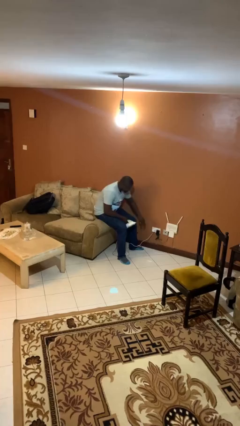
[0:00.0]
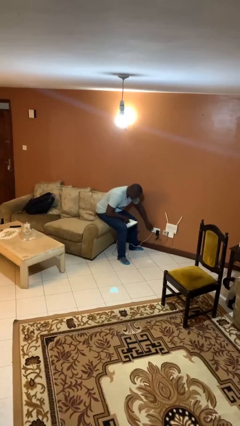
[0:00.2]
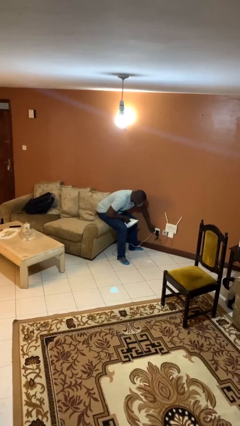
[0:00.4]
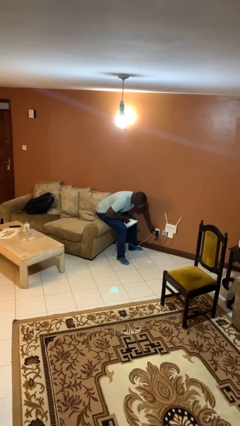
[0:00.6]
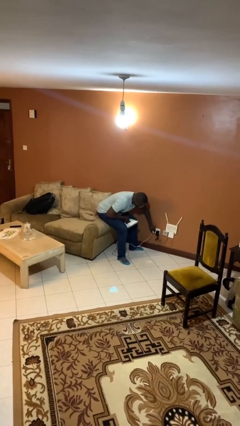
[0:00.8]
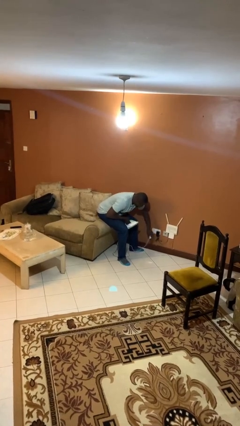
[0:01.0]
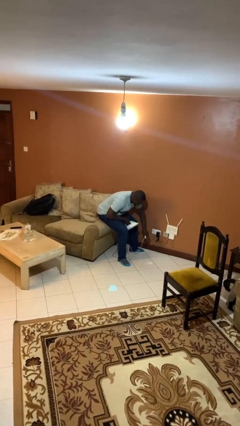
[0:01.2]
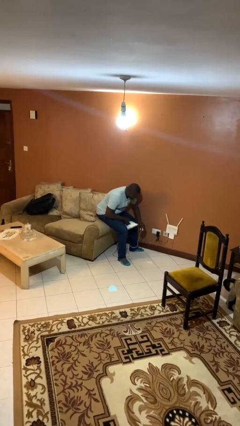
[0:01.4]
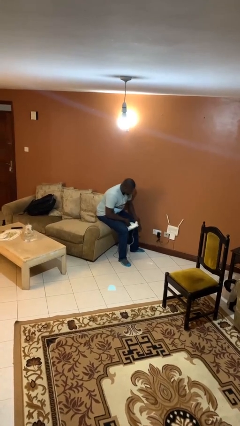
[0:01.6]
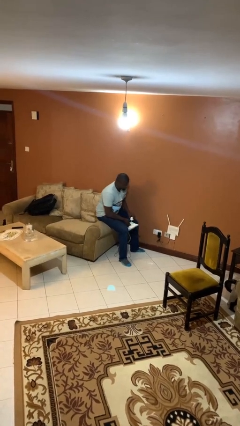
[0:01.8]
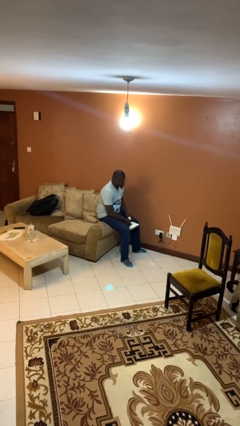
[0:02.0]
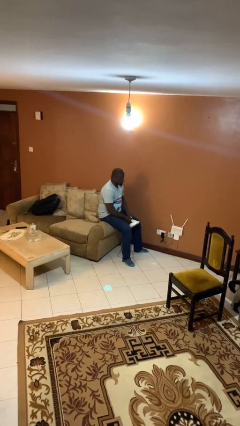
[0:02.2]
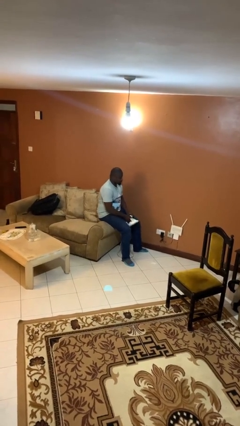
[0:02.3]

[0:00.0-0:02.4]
person unplugs from electrical socket

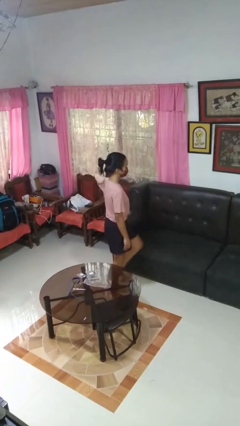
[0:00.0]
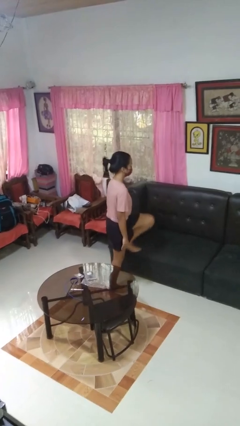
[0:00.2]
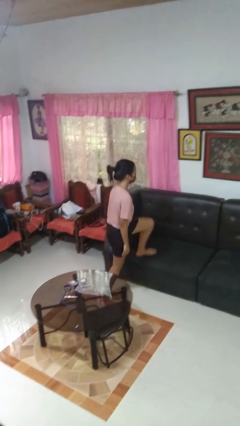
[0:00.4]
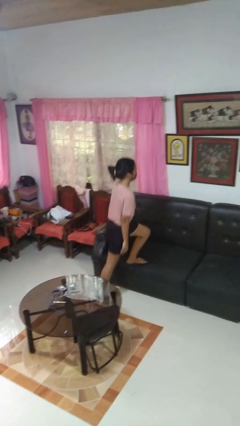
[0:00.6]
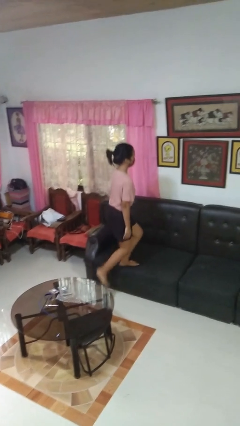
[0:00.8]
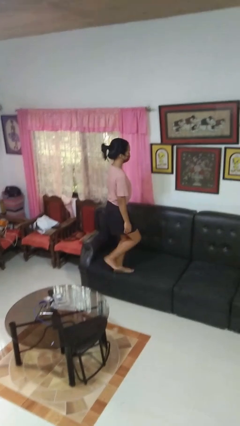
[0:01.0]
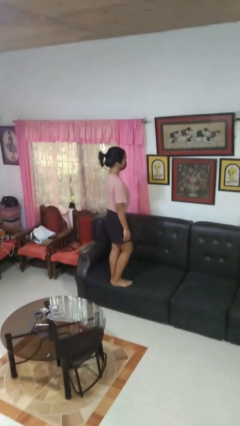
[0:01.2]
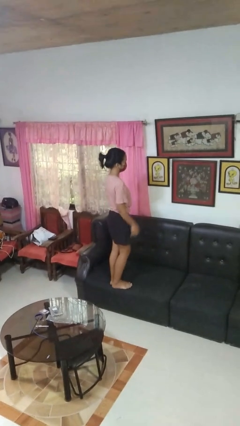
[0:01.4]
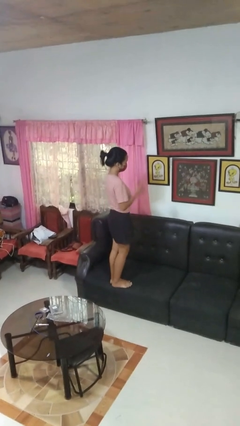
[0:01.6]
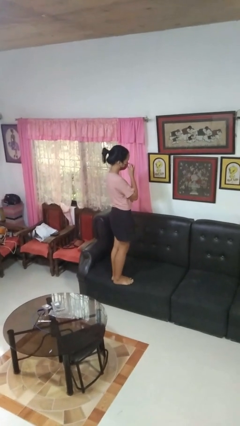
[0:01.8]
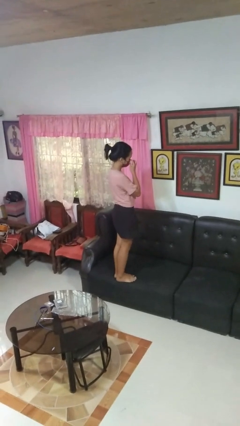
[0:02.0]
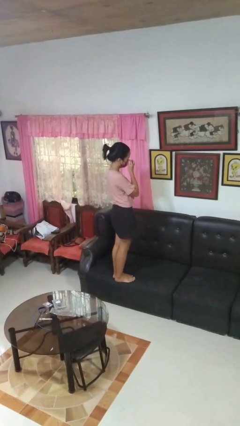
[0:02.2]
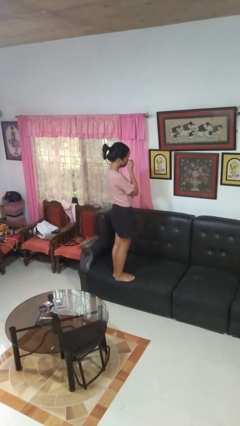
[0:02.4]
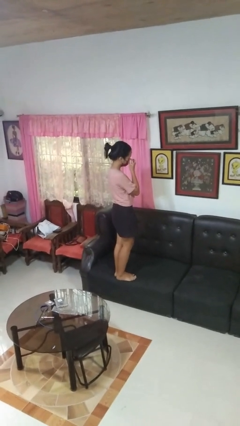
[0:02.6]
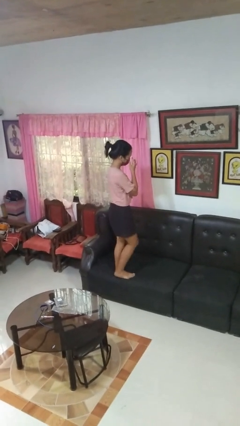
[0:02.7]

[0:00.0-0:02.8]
person climbs on couch

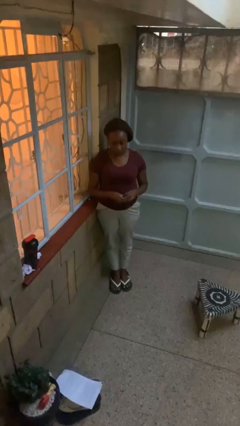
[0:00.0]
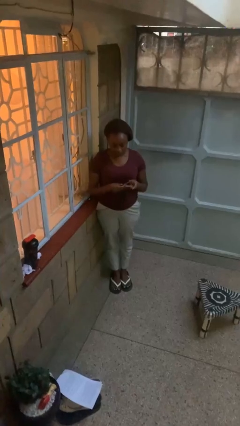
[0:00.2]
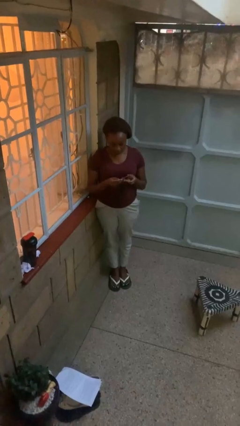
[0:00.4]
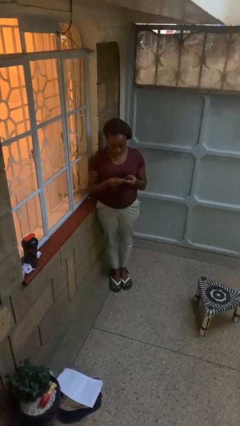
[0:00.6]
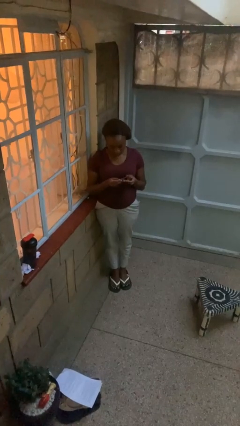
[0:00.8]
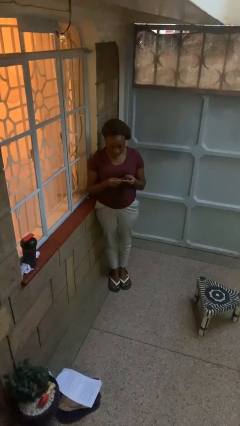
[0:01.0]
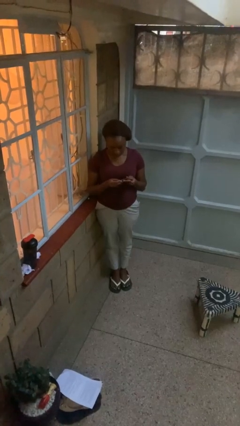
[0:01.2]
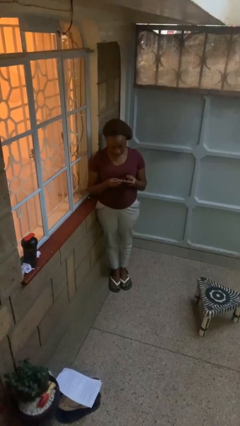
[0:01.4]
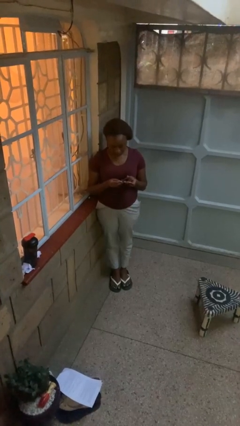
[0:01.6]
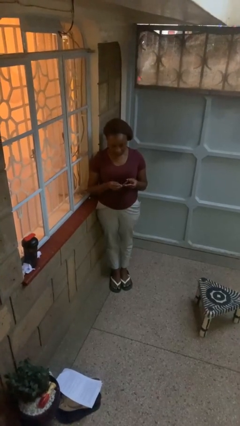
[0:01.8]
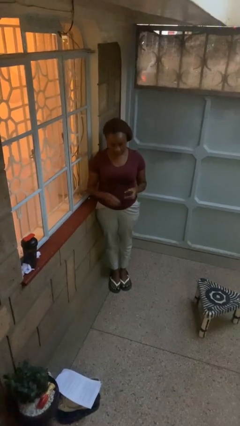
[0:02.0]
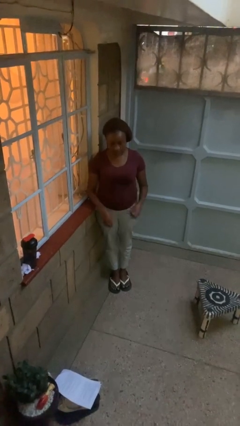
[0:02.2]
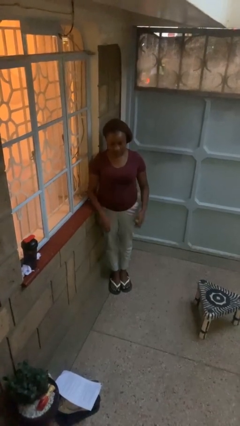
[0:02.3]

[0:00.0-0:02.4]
person clips fingernails

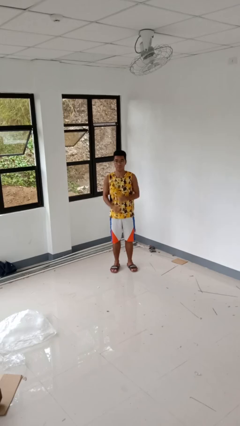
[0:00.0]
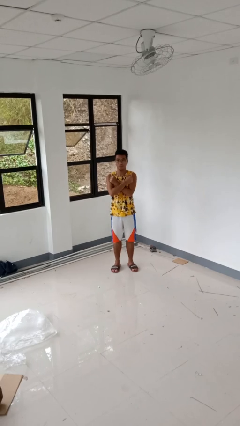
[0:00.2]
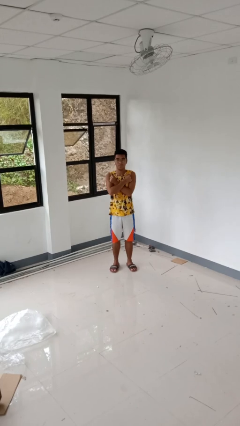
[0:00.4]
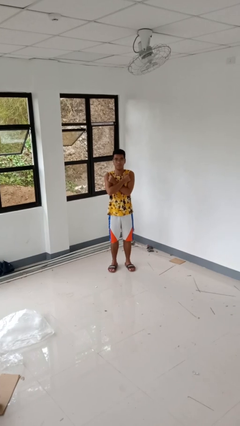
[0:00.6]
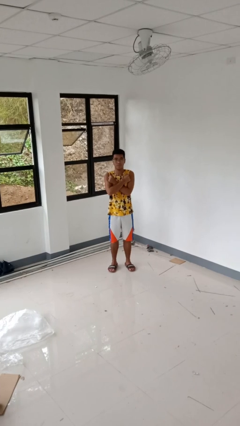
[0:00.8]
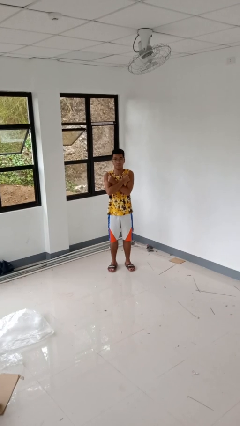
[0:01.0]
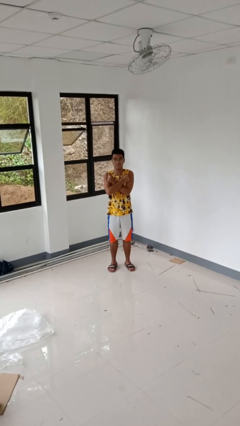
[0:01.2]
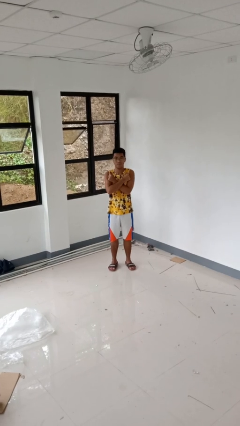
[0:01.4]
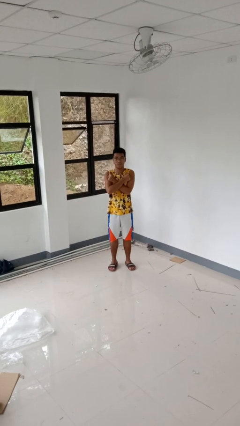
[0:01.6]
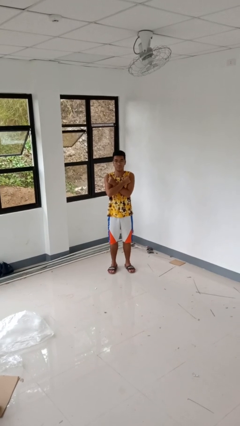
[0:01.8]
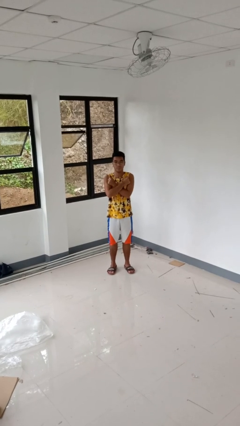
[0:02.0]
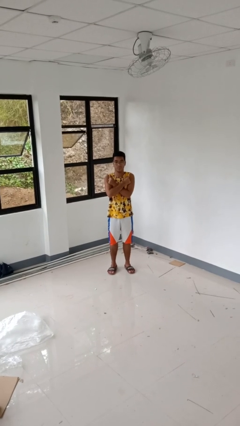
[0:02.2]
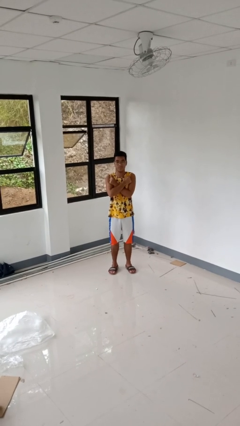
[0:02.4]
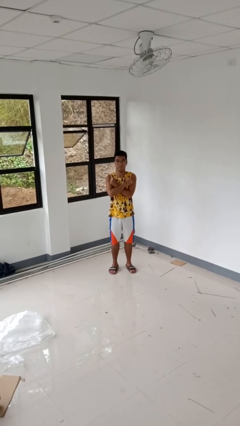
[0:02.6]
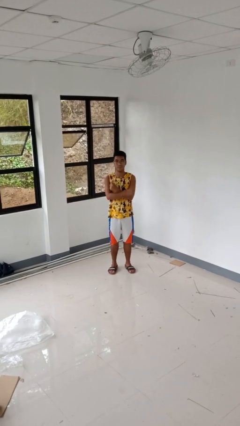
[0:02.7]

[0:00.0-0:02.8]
person gestures arms x

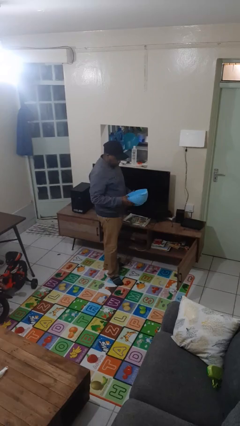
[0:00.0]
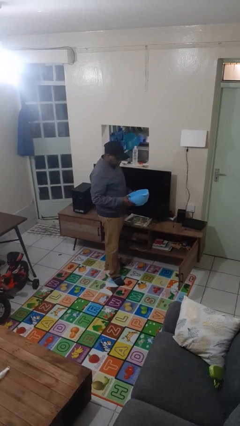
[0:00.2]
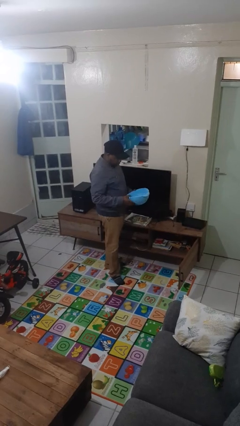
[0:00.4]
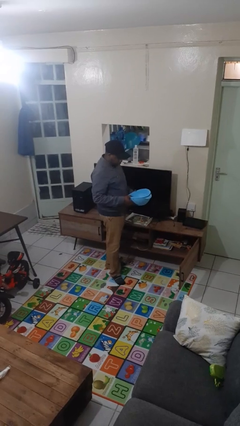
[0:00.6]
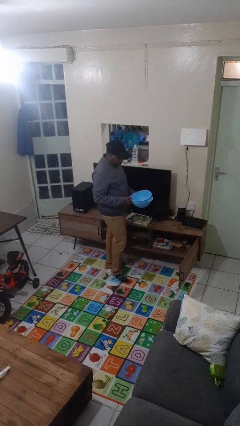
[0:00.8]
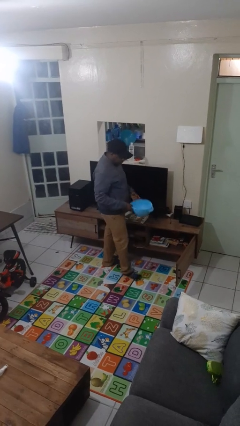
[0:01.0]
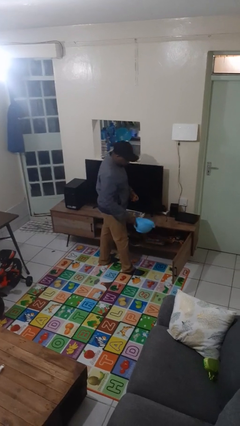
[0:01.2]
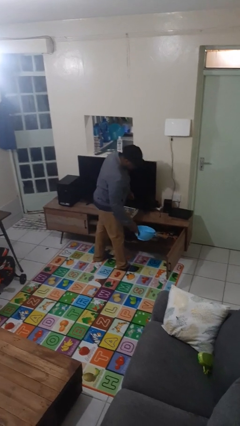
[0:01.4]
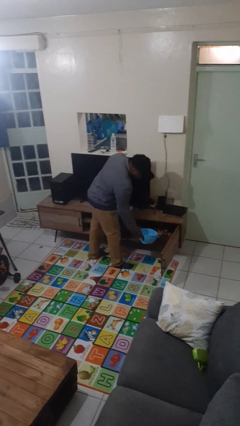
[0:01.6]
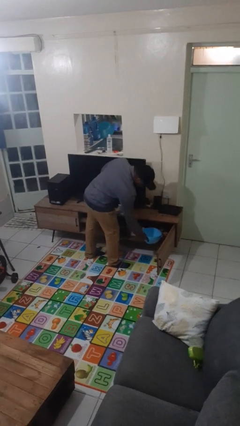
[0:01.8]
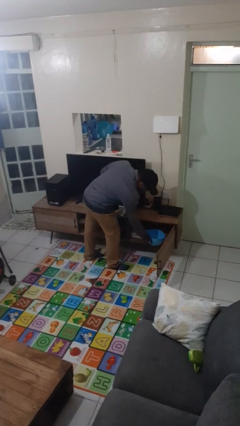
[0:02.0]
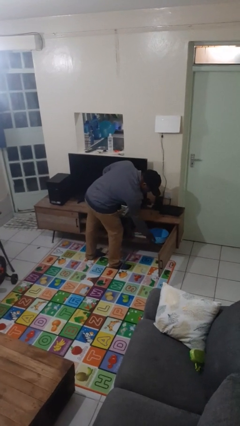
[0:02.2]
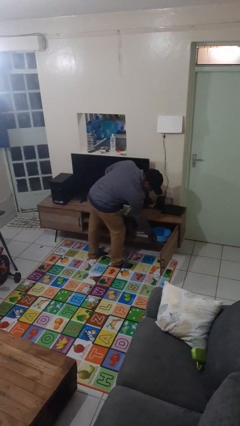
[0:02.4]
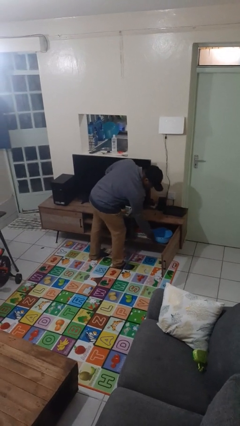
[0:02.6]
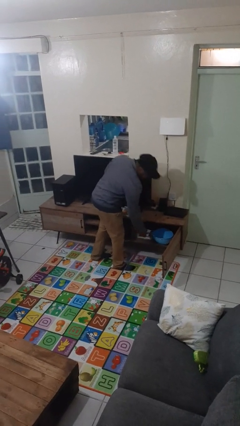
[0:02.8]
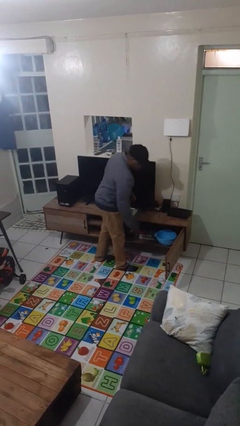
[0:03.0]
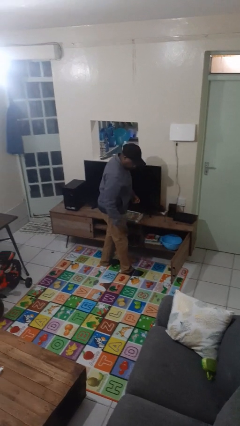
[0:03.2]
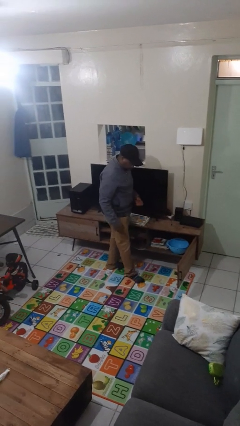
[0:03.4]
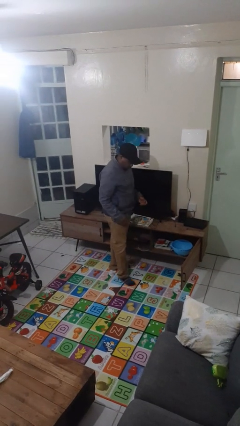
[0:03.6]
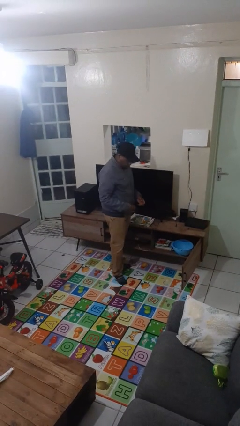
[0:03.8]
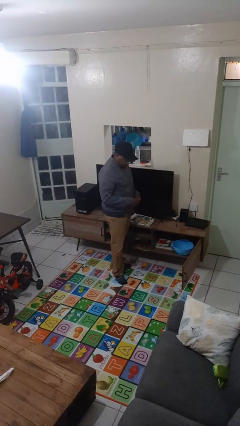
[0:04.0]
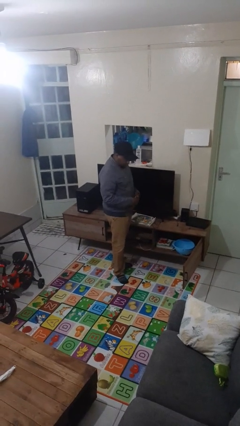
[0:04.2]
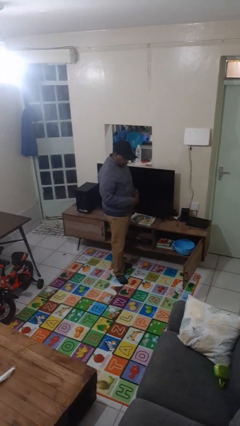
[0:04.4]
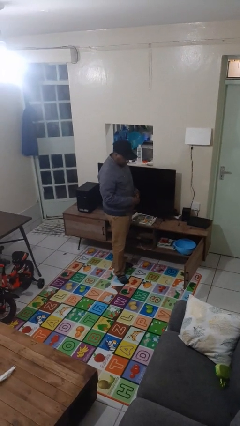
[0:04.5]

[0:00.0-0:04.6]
person puts down object into cabinet

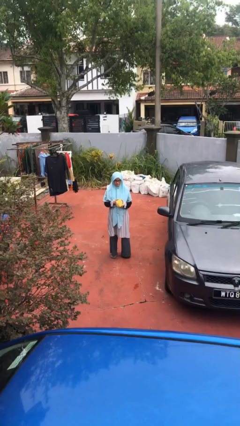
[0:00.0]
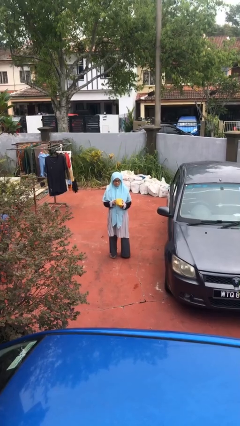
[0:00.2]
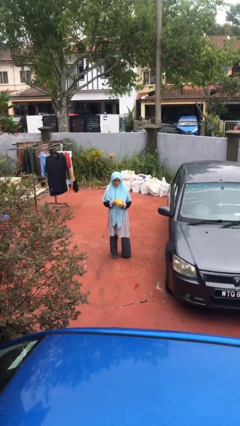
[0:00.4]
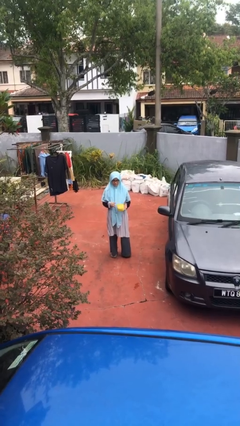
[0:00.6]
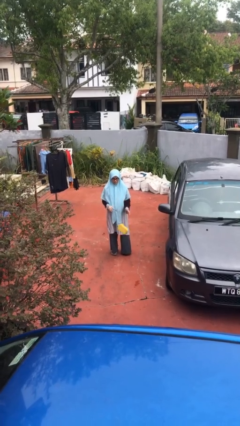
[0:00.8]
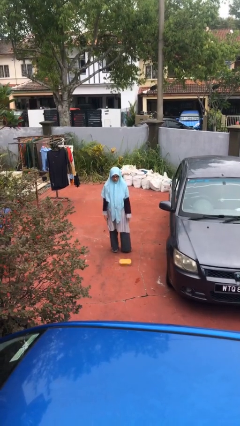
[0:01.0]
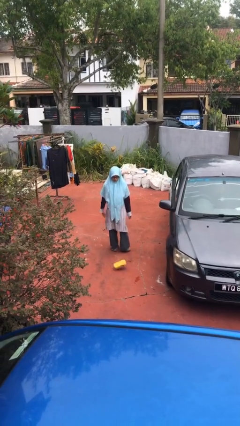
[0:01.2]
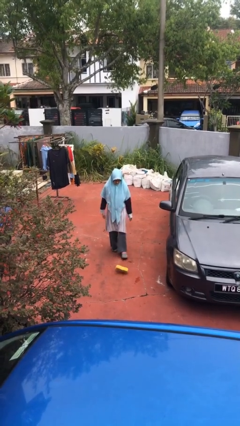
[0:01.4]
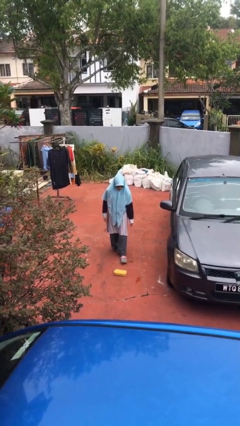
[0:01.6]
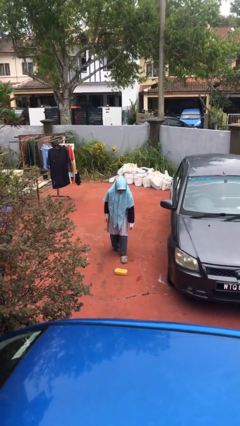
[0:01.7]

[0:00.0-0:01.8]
person drops object

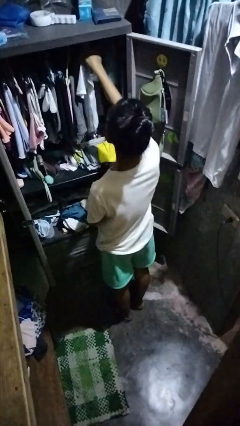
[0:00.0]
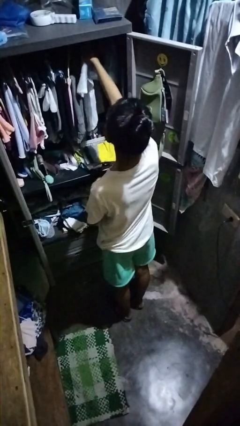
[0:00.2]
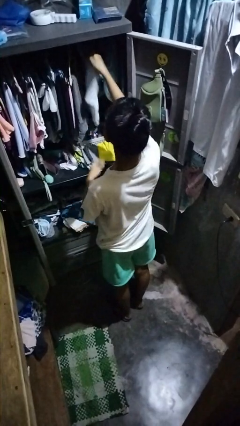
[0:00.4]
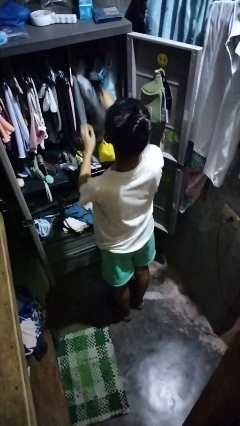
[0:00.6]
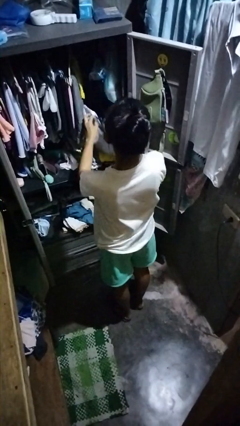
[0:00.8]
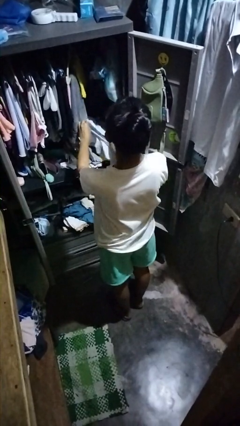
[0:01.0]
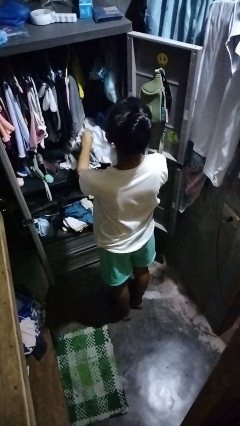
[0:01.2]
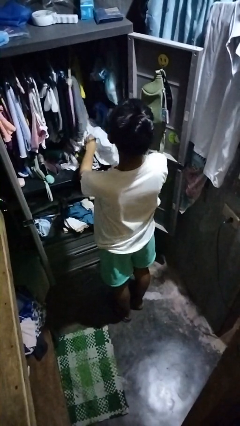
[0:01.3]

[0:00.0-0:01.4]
person takes clothes from closet
